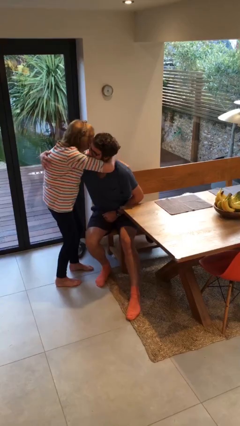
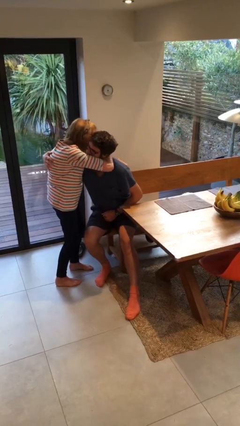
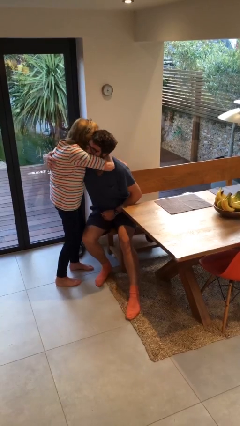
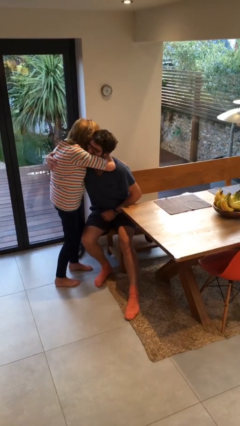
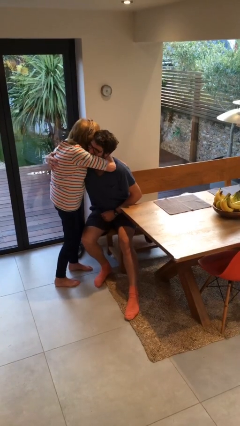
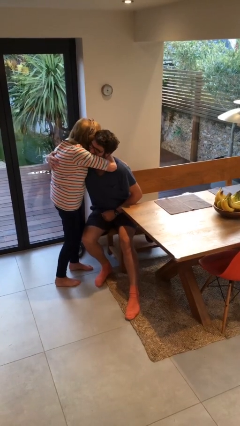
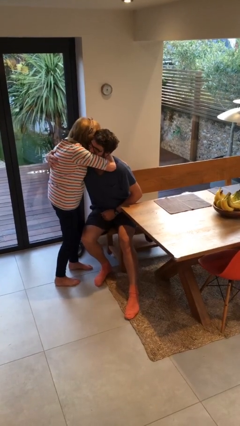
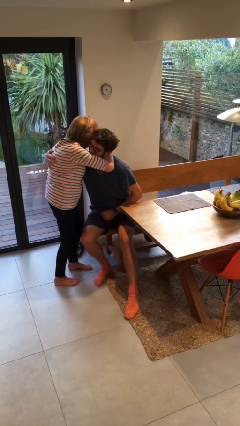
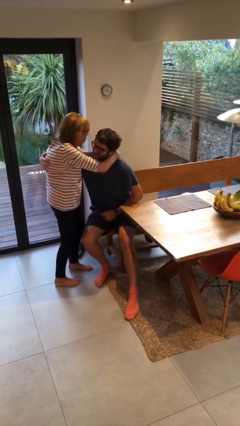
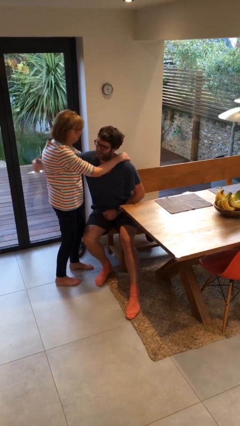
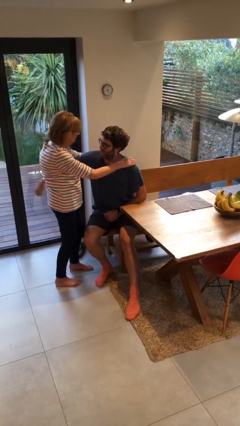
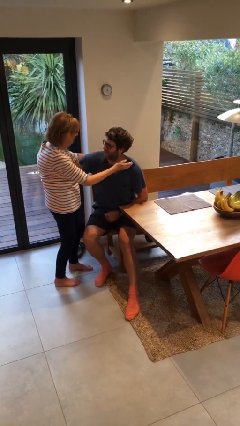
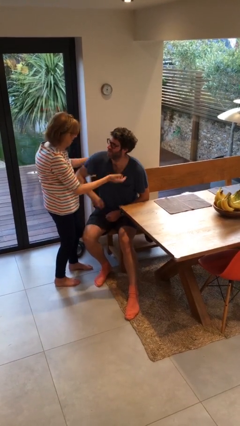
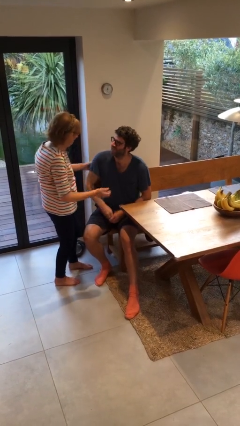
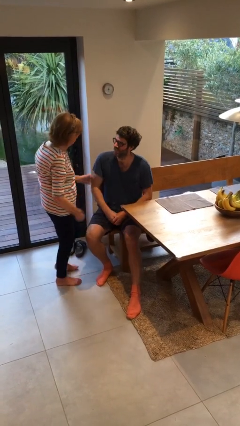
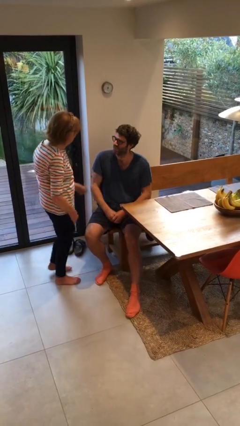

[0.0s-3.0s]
person embraces person

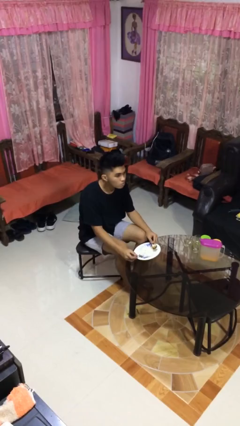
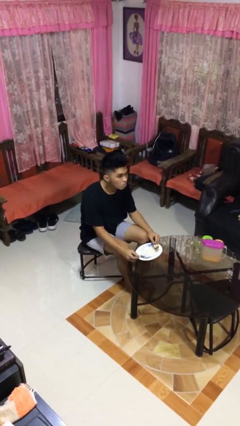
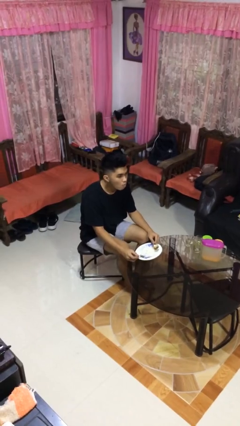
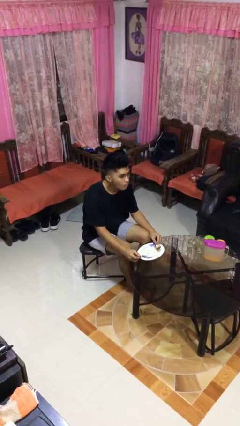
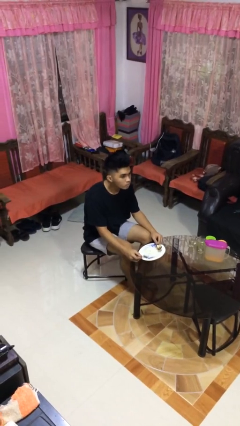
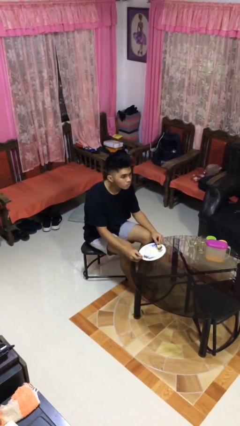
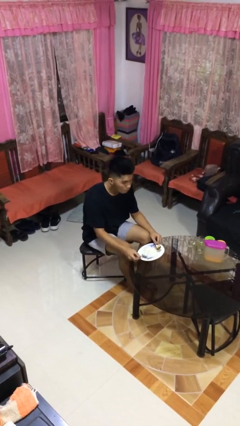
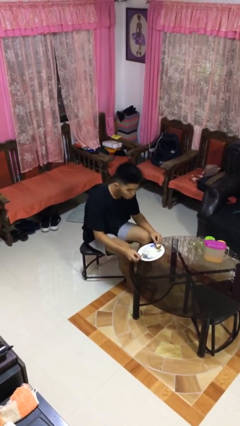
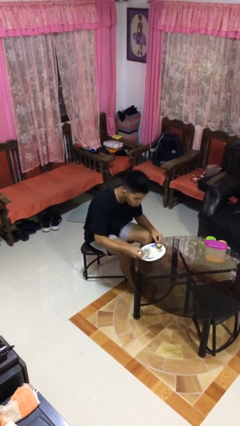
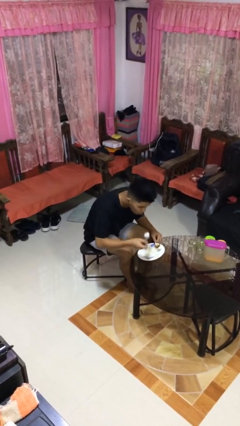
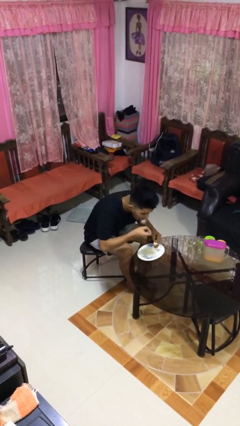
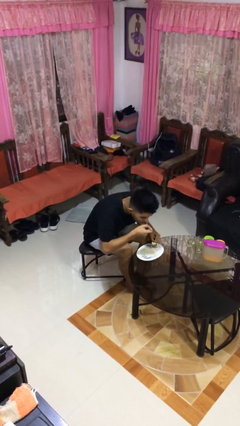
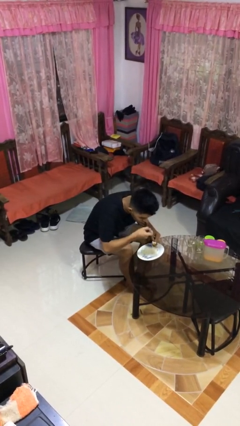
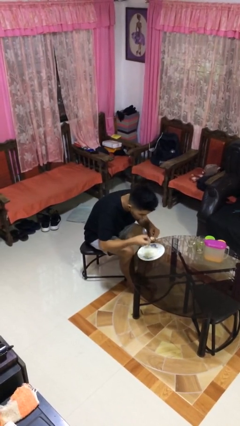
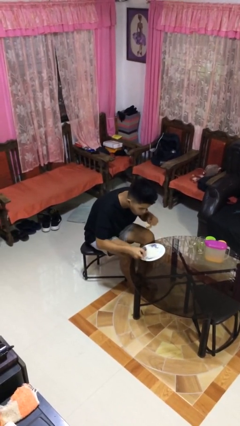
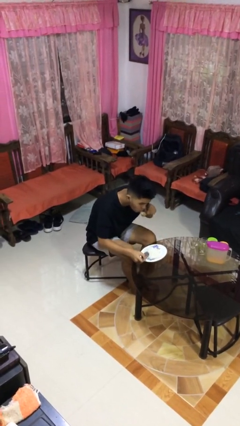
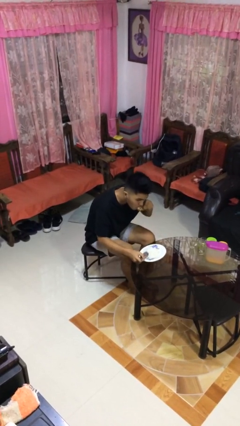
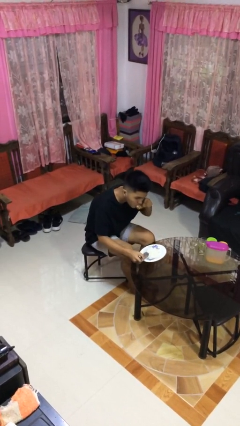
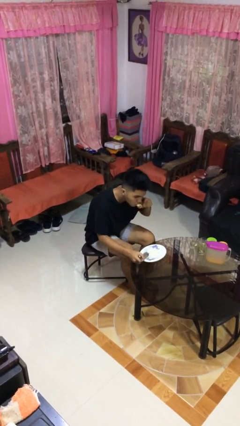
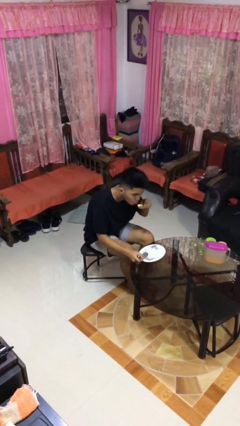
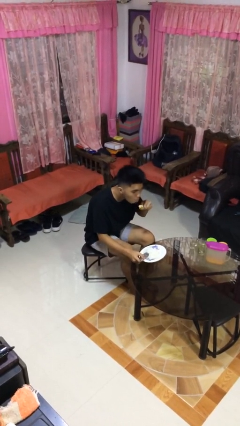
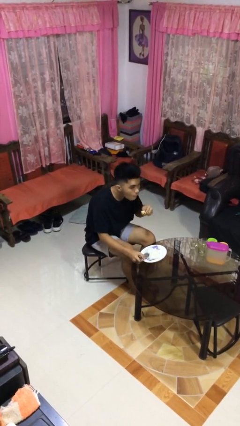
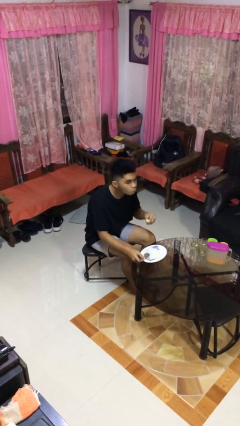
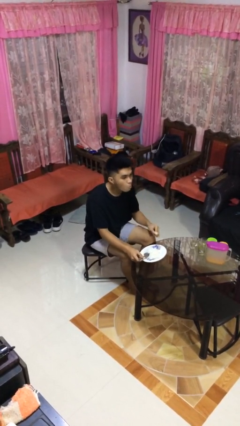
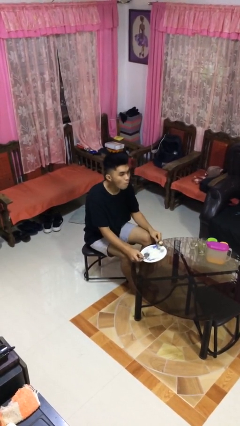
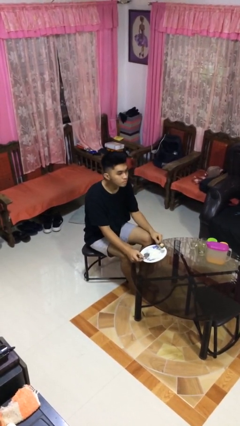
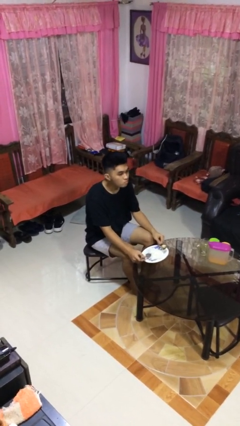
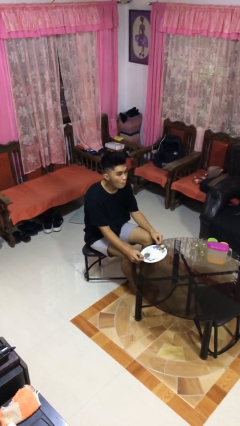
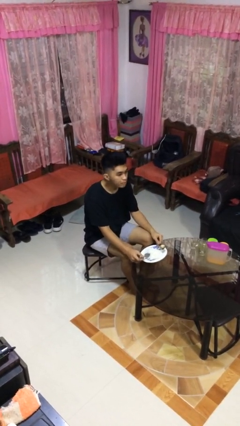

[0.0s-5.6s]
person eats with utensil

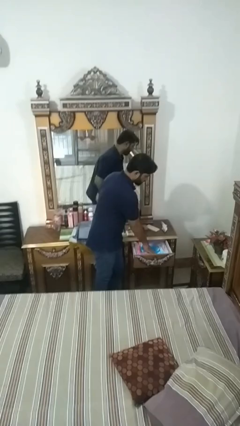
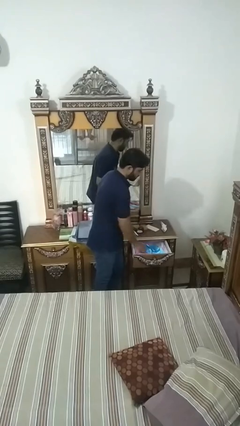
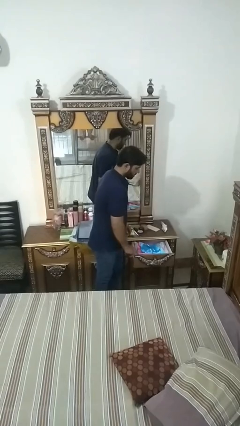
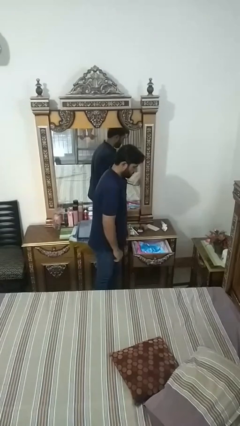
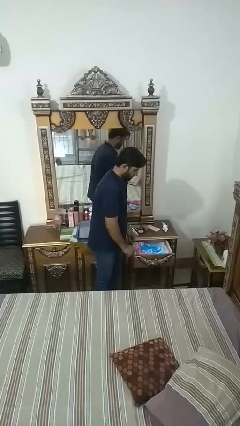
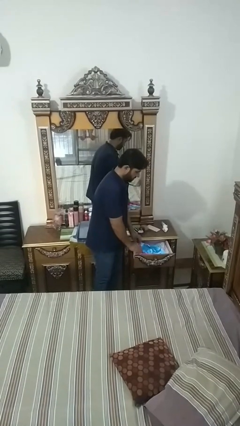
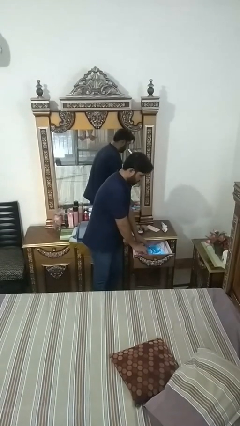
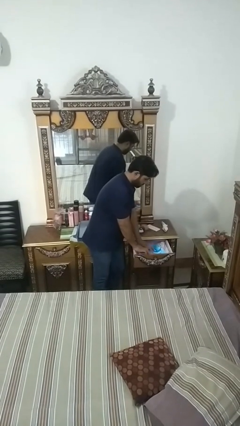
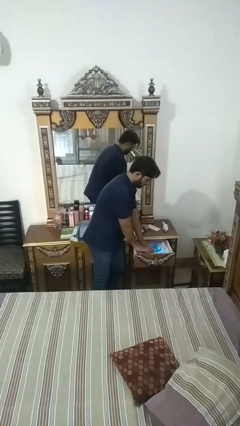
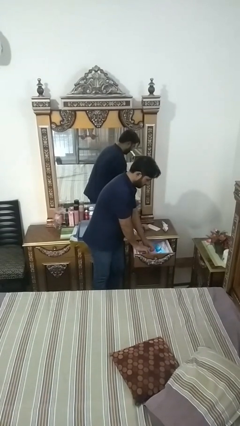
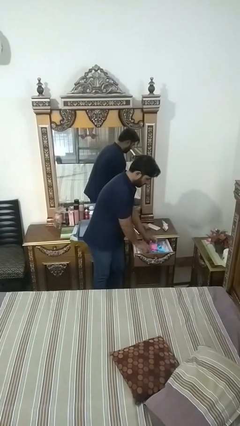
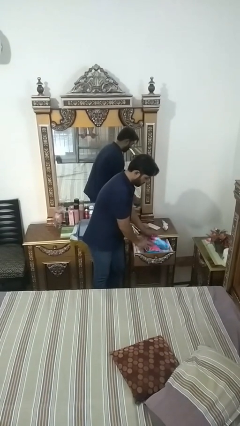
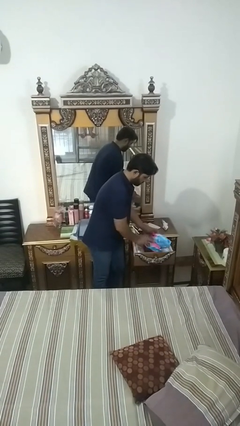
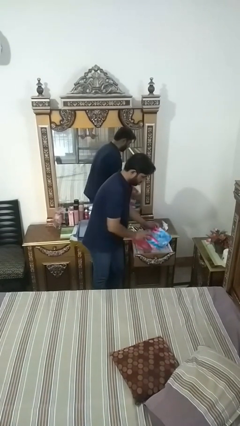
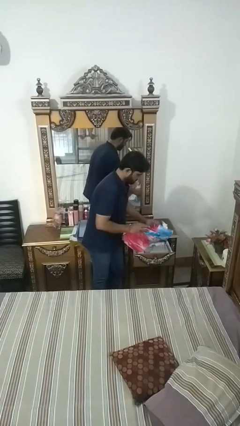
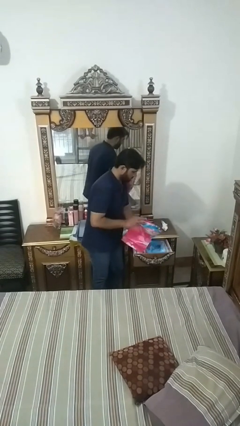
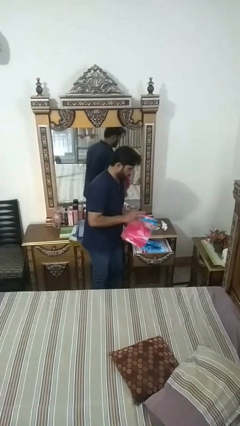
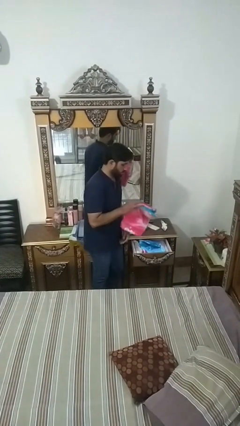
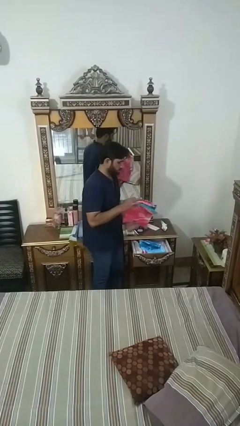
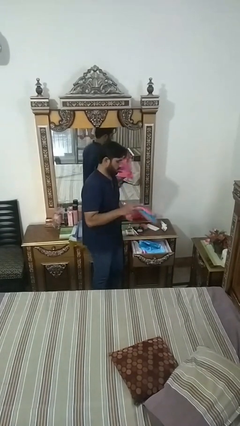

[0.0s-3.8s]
person takes clothes from dresser

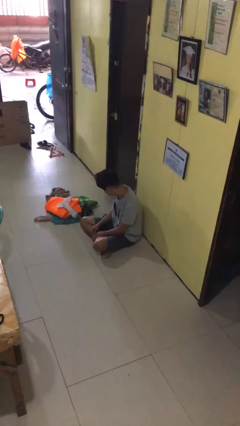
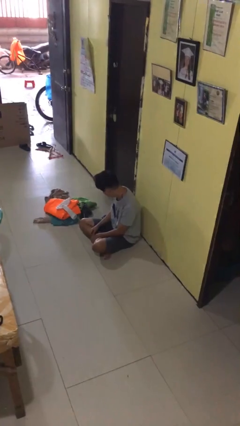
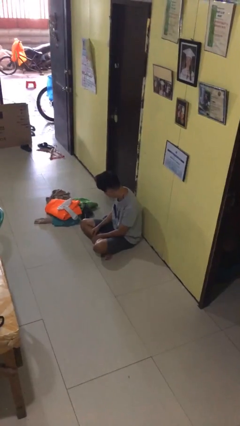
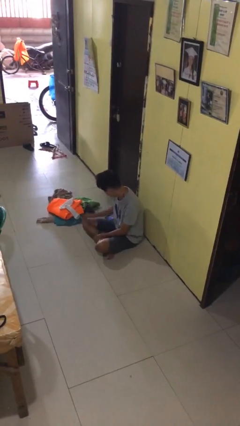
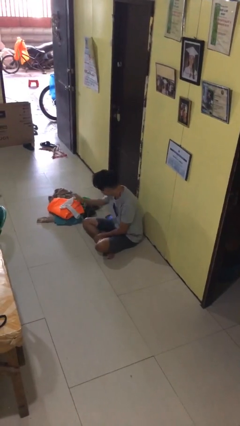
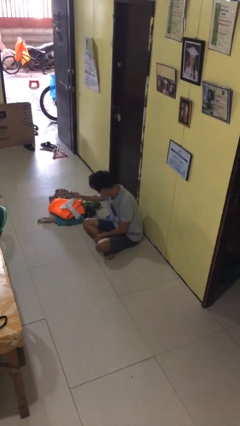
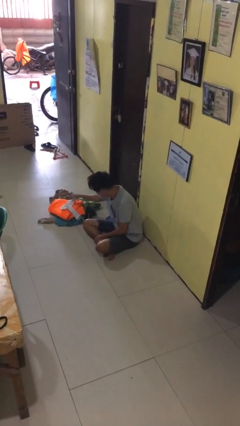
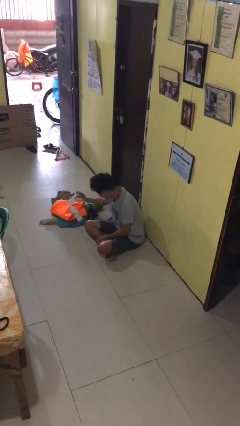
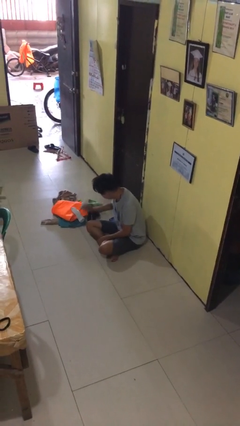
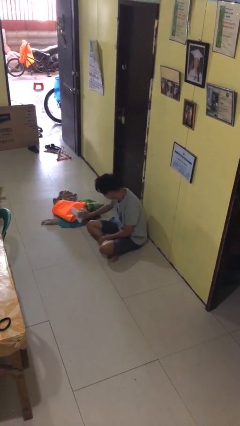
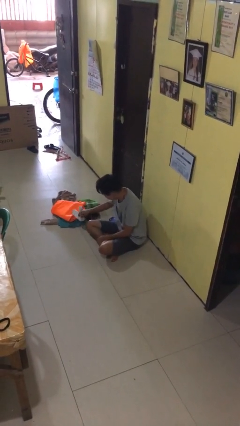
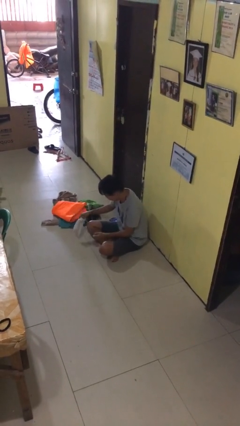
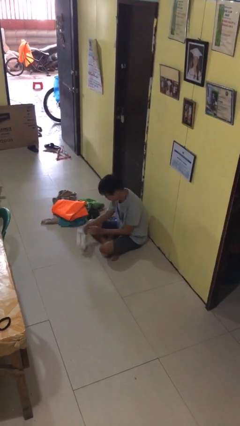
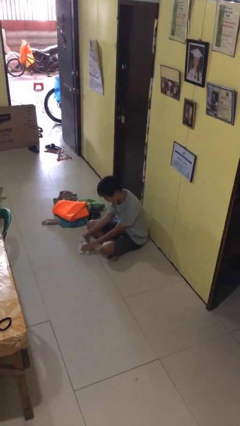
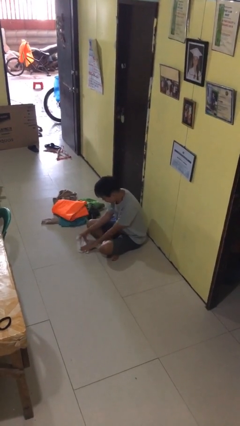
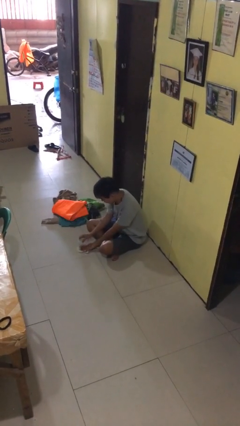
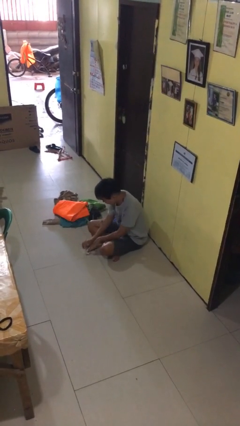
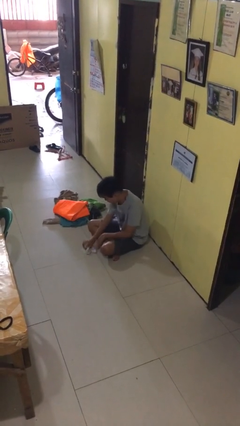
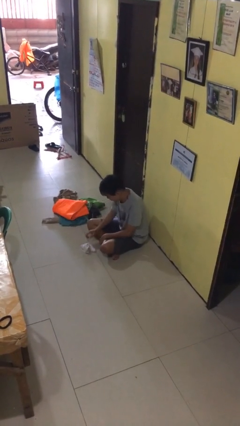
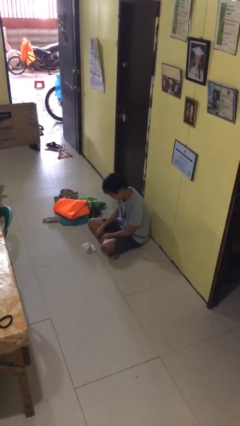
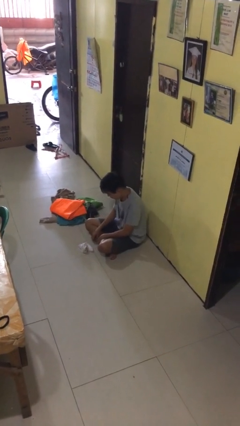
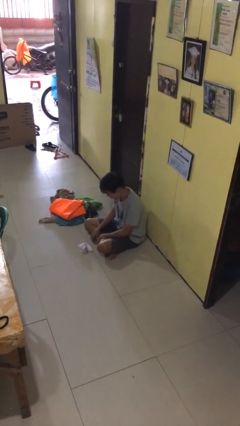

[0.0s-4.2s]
person folds socks

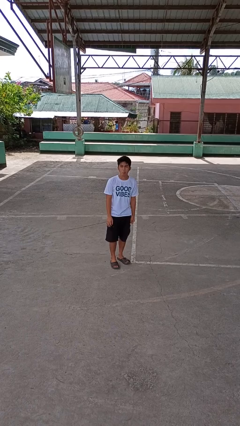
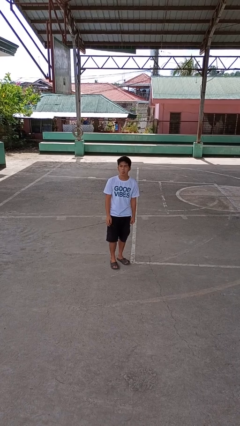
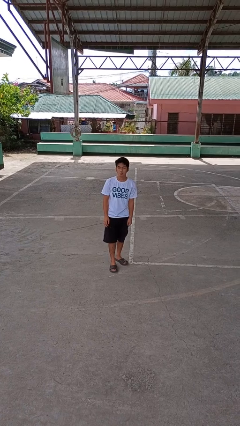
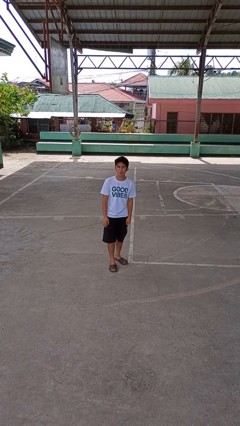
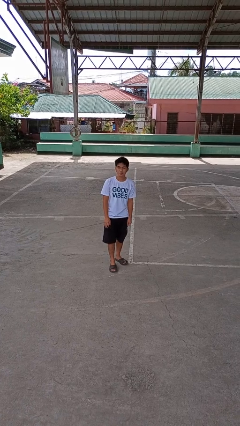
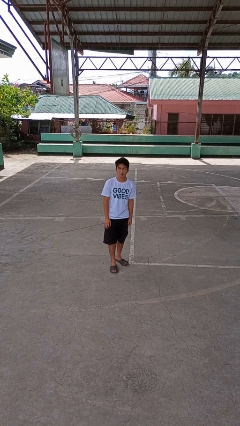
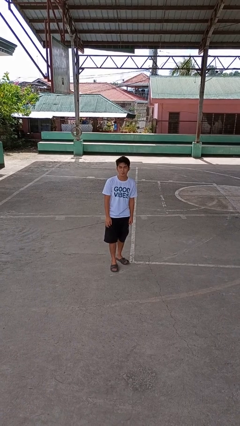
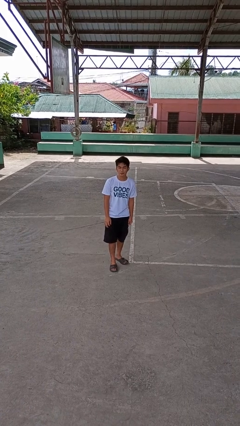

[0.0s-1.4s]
person sticks out tongue
